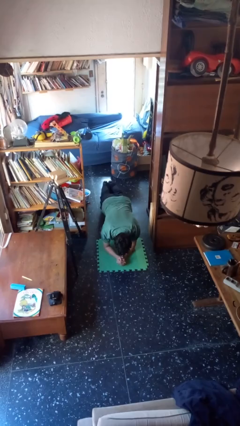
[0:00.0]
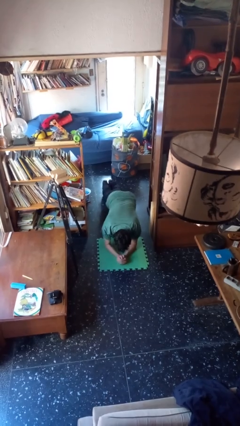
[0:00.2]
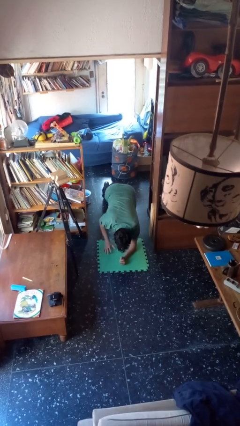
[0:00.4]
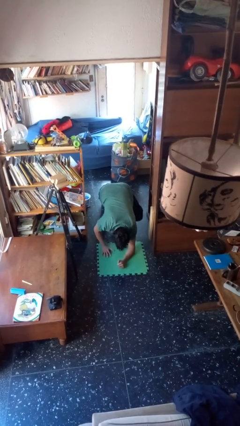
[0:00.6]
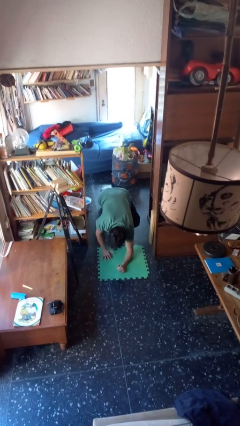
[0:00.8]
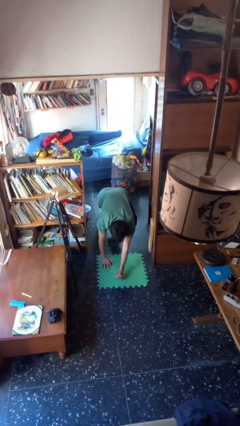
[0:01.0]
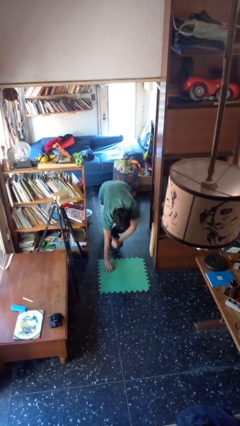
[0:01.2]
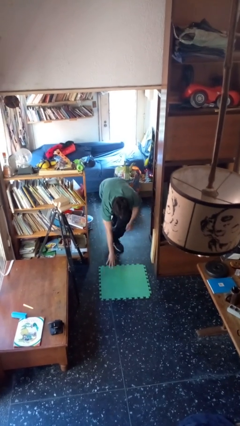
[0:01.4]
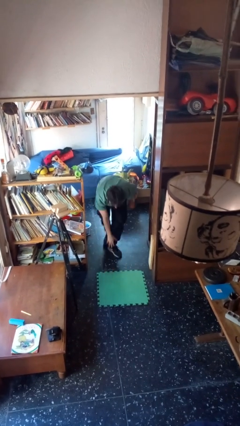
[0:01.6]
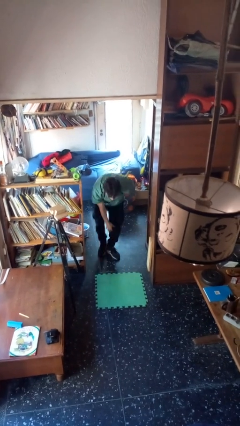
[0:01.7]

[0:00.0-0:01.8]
person stands up from floor

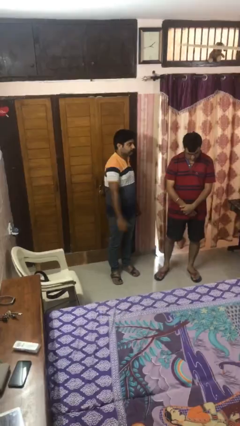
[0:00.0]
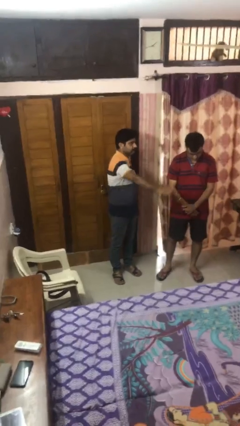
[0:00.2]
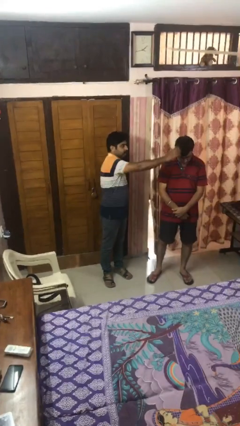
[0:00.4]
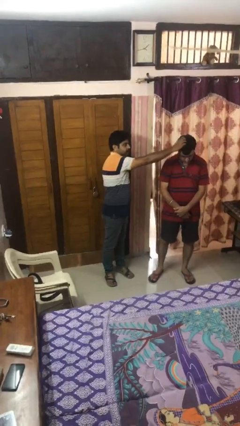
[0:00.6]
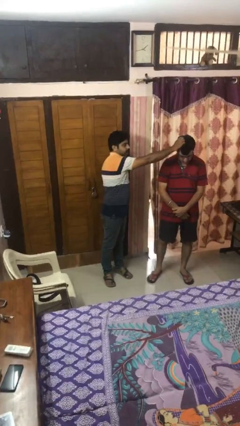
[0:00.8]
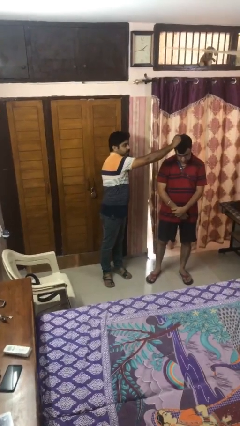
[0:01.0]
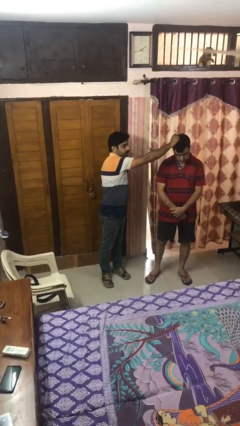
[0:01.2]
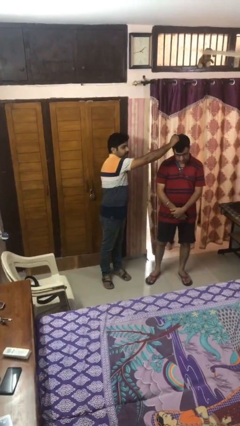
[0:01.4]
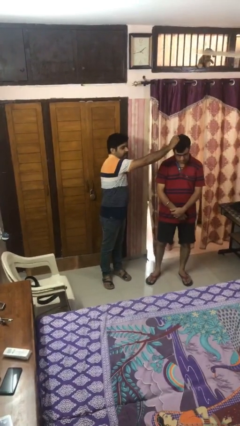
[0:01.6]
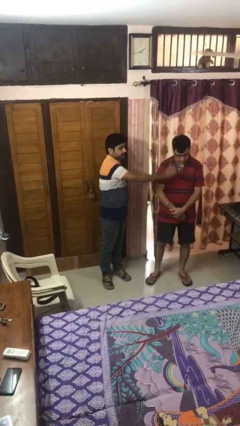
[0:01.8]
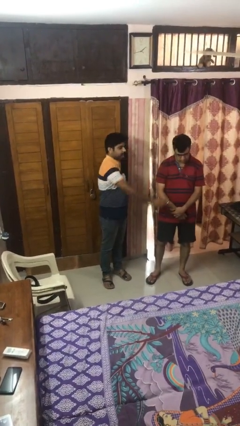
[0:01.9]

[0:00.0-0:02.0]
person grabs person by hair

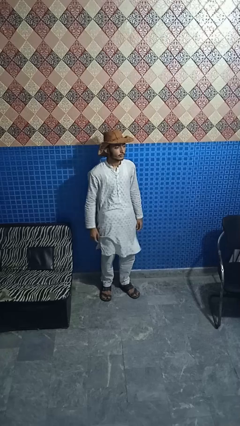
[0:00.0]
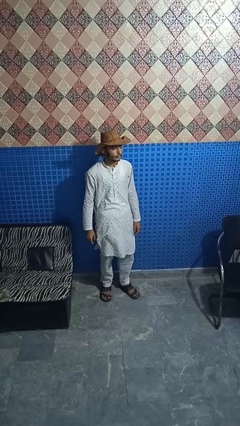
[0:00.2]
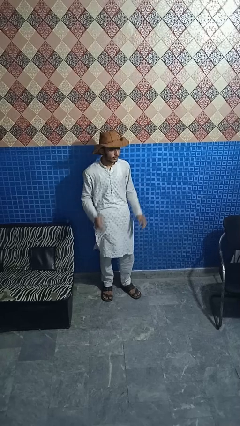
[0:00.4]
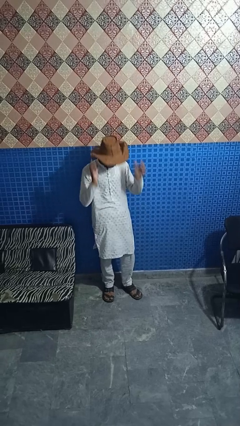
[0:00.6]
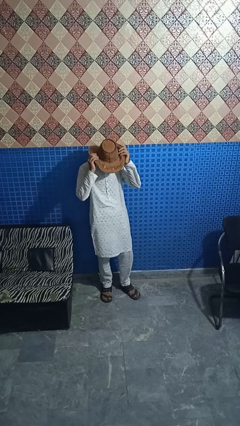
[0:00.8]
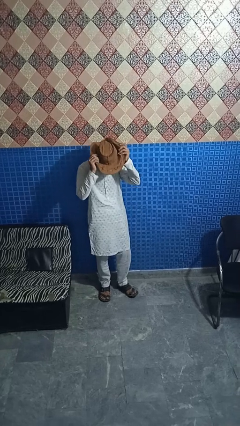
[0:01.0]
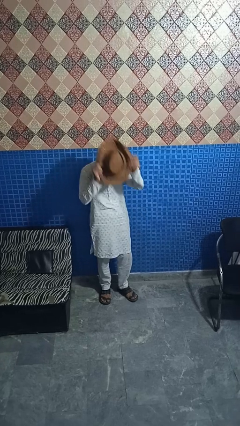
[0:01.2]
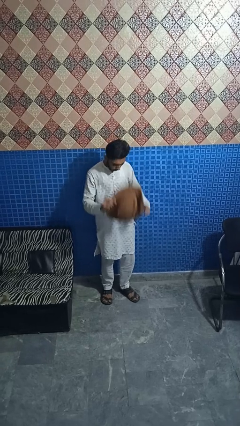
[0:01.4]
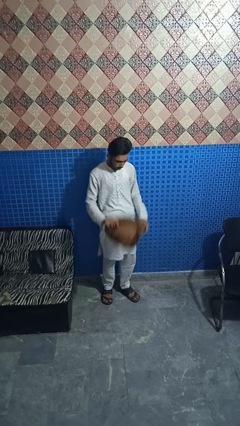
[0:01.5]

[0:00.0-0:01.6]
person takes off hat

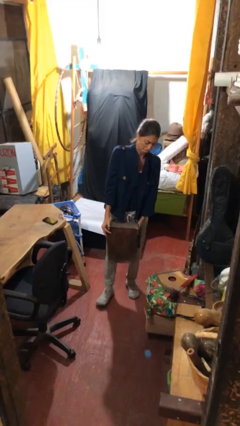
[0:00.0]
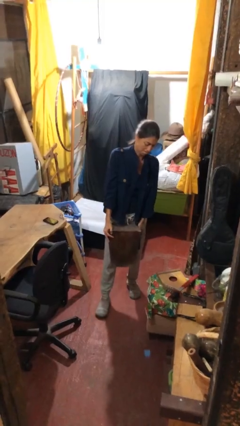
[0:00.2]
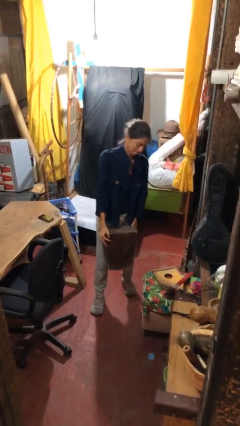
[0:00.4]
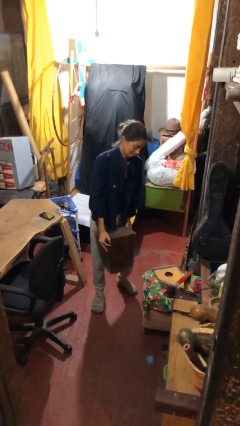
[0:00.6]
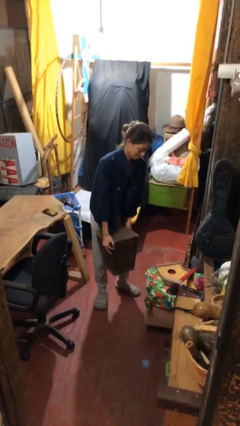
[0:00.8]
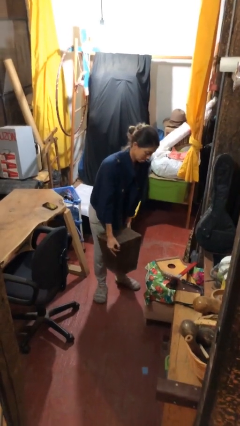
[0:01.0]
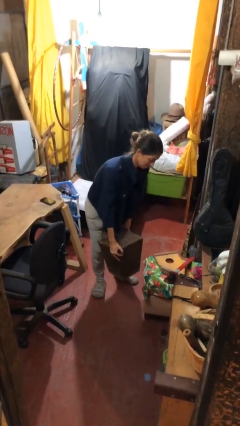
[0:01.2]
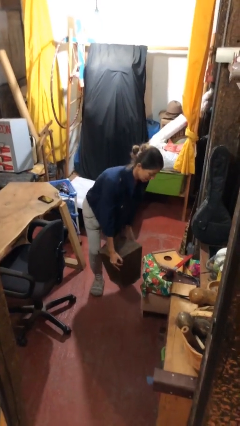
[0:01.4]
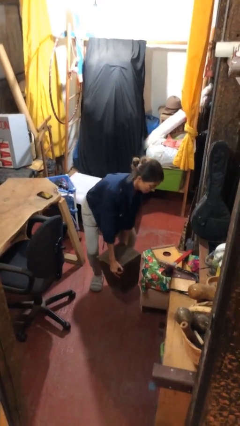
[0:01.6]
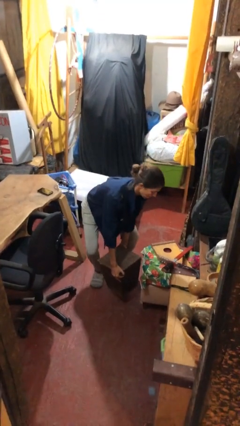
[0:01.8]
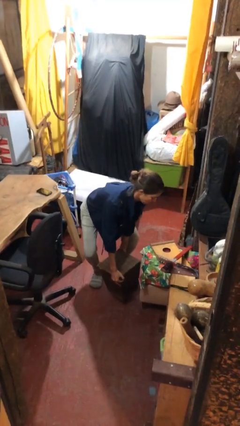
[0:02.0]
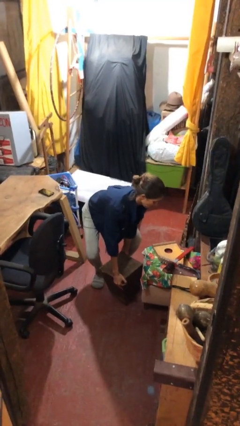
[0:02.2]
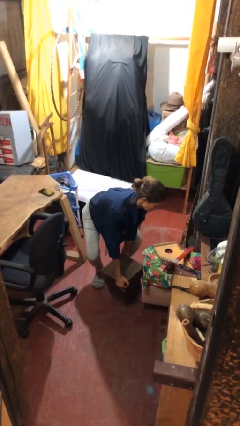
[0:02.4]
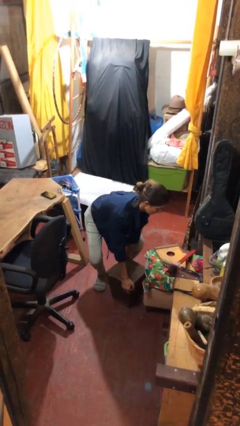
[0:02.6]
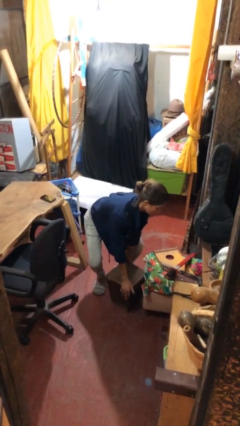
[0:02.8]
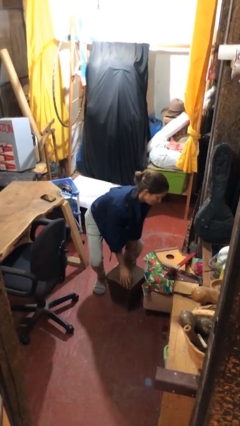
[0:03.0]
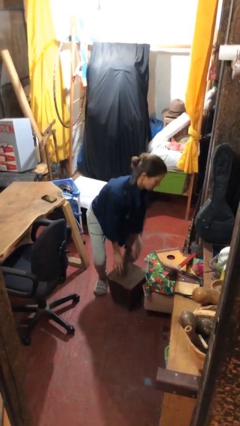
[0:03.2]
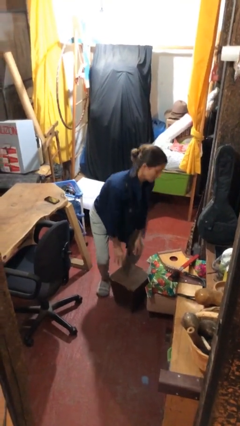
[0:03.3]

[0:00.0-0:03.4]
person puts down object on floor

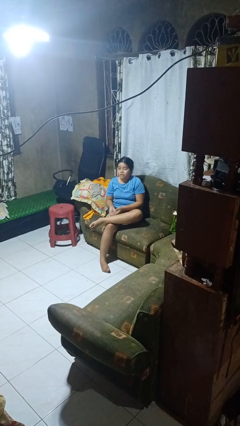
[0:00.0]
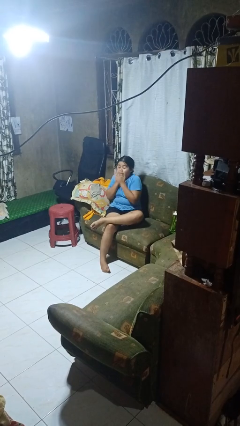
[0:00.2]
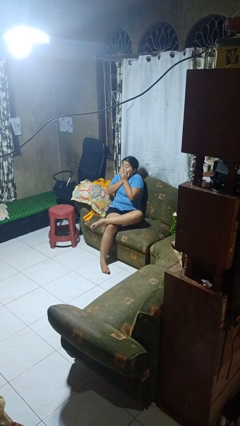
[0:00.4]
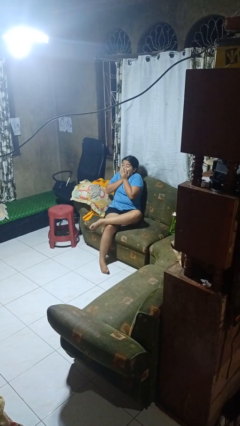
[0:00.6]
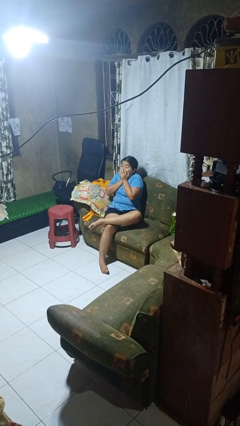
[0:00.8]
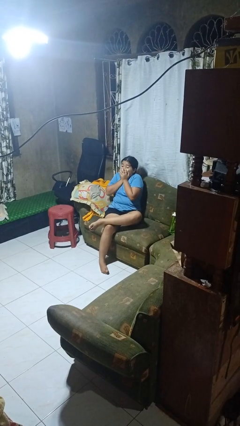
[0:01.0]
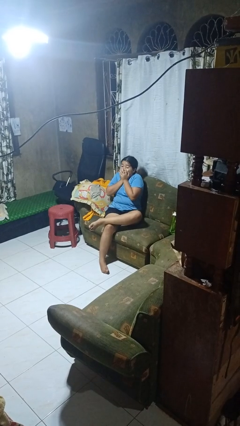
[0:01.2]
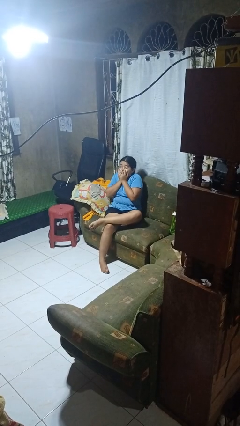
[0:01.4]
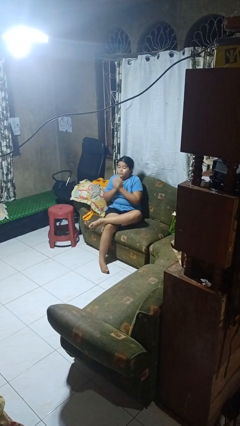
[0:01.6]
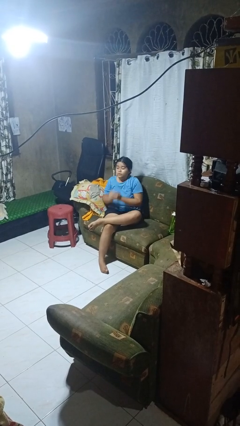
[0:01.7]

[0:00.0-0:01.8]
person covers face with hands

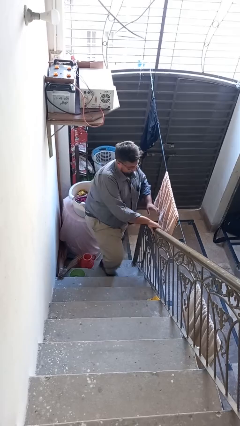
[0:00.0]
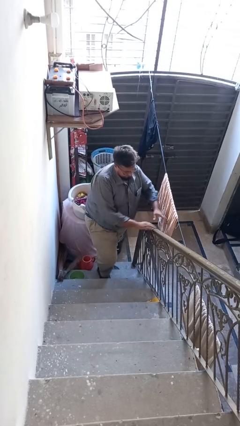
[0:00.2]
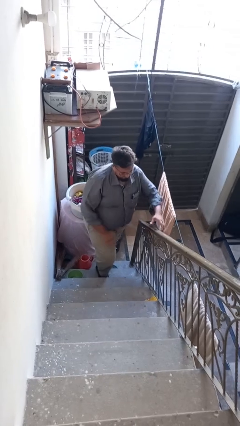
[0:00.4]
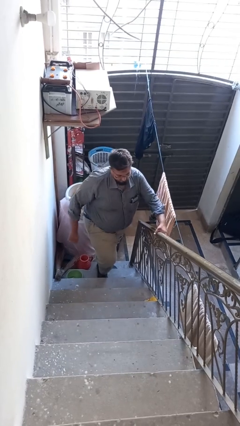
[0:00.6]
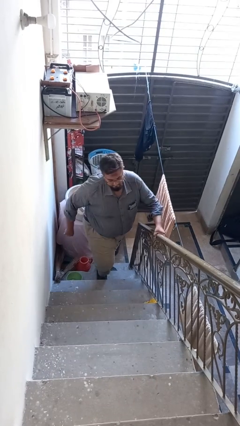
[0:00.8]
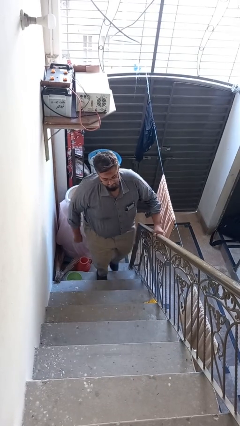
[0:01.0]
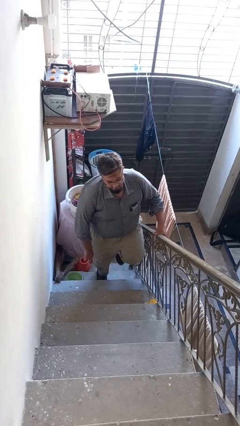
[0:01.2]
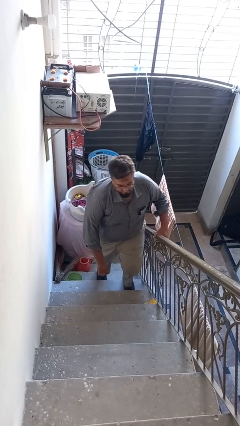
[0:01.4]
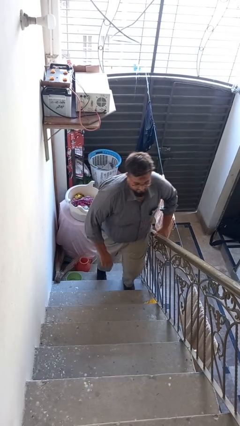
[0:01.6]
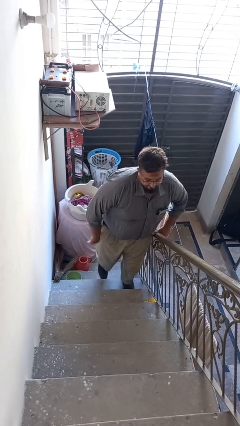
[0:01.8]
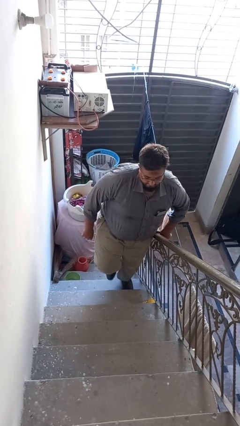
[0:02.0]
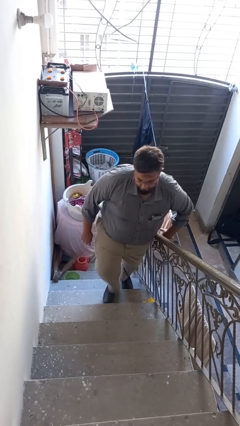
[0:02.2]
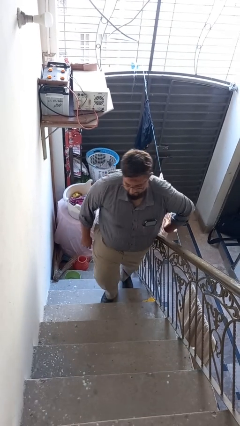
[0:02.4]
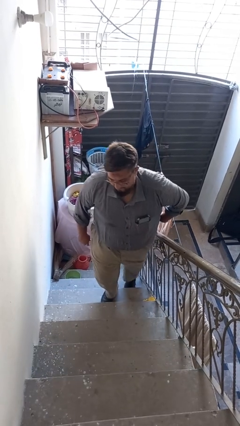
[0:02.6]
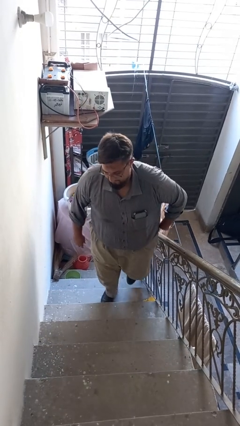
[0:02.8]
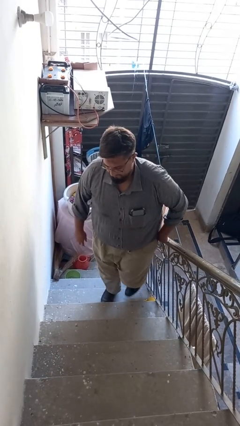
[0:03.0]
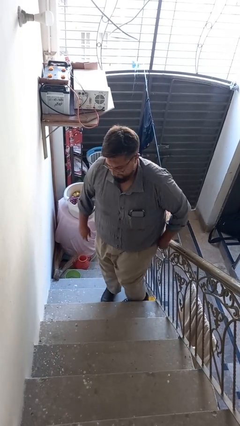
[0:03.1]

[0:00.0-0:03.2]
person climbs up stairs

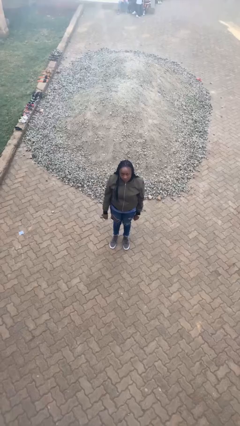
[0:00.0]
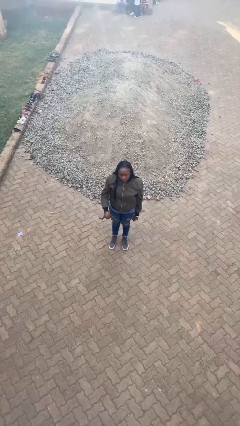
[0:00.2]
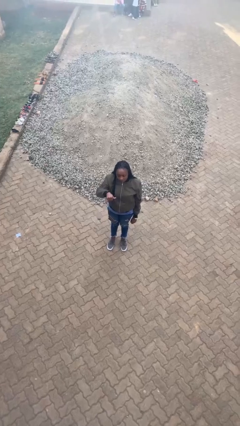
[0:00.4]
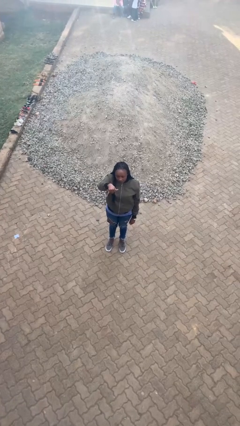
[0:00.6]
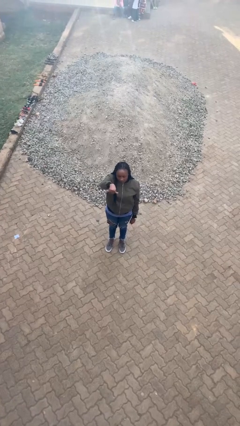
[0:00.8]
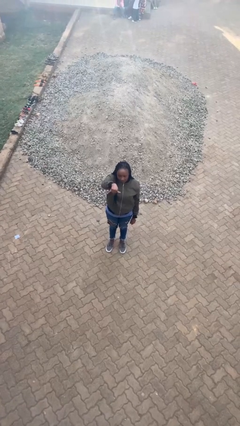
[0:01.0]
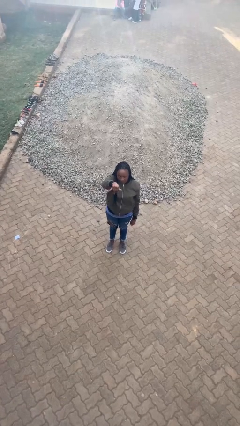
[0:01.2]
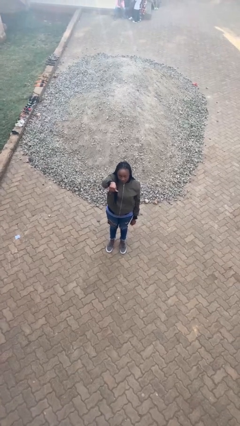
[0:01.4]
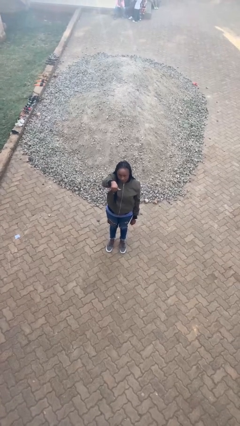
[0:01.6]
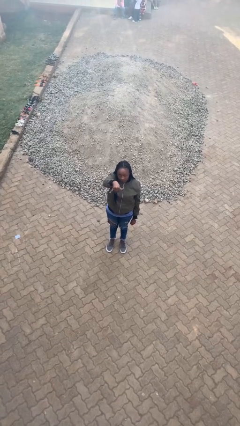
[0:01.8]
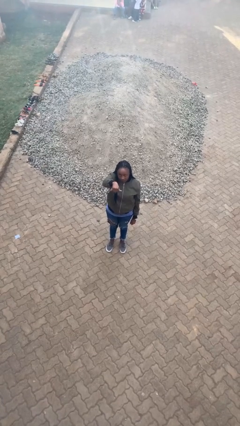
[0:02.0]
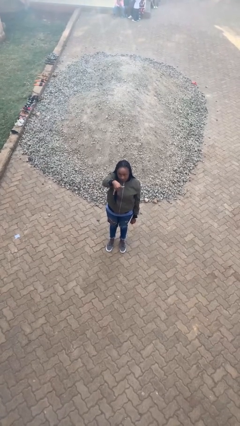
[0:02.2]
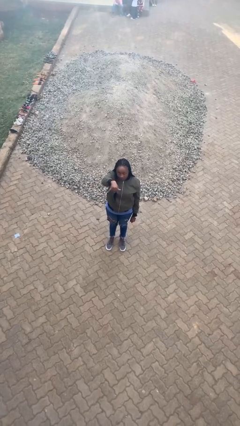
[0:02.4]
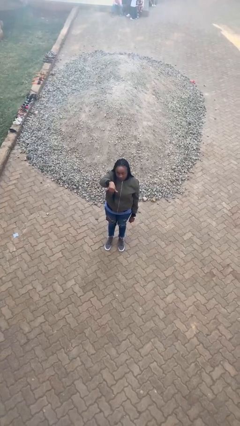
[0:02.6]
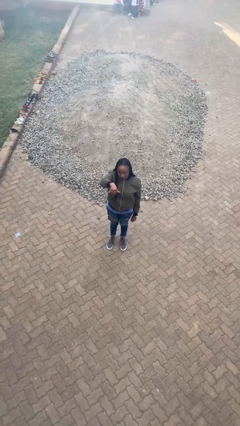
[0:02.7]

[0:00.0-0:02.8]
person gestures hang loose

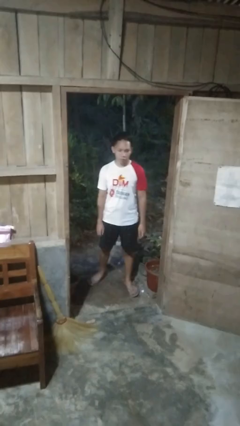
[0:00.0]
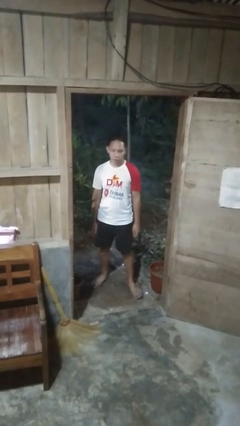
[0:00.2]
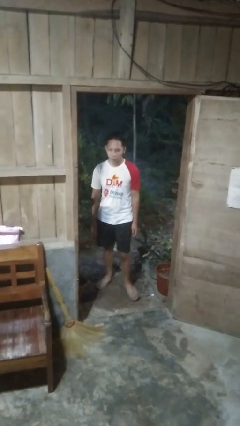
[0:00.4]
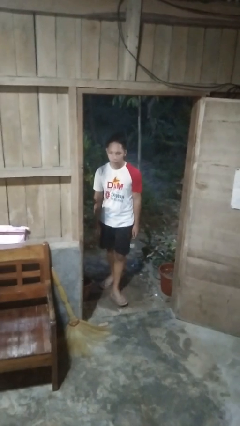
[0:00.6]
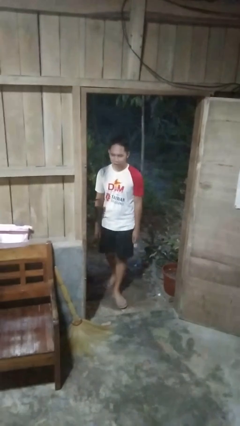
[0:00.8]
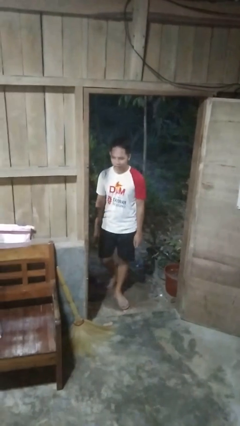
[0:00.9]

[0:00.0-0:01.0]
person bumps into wall
